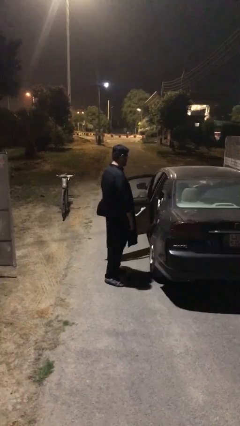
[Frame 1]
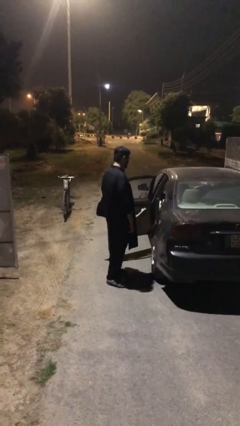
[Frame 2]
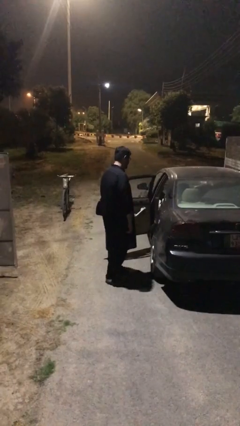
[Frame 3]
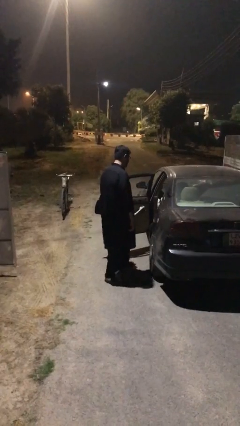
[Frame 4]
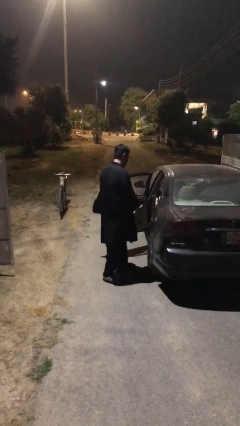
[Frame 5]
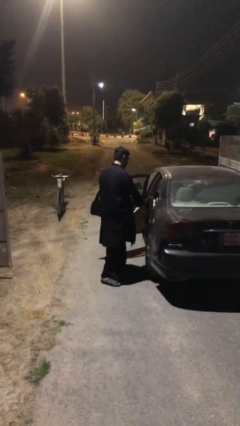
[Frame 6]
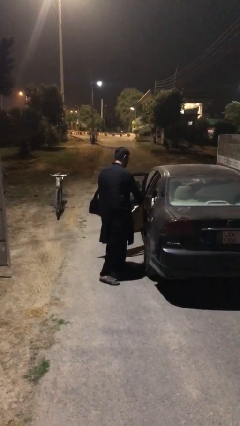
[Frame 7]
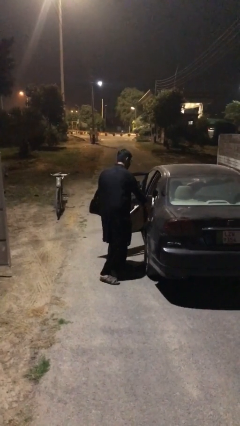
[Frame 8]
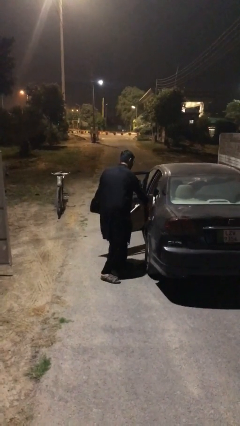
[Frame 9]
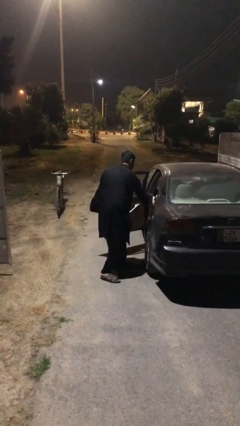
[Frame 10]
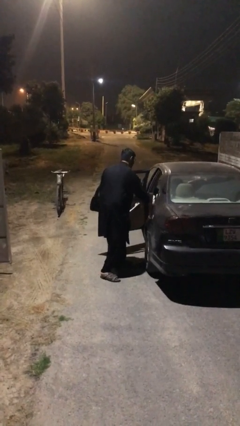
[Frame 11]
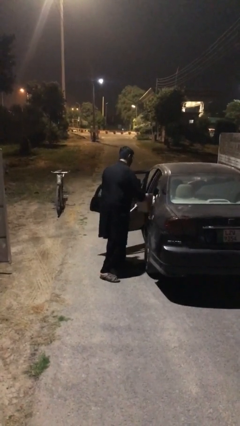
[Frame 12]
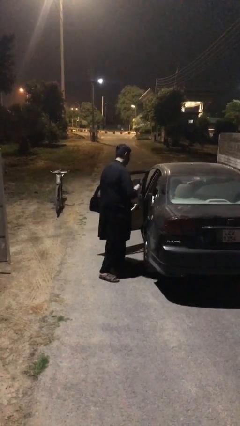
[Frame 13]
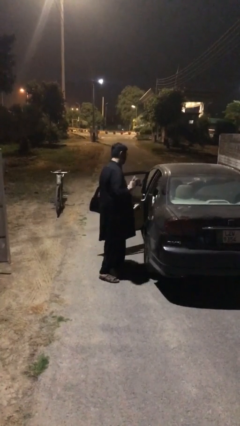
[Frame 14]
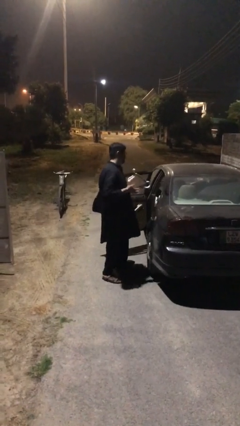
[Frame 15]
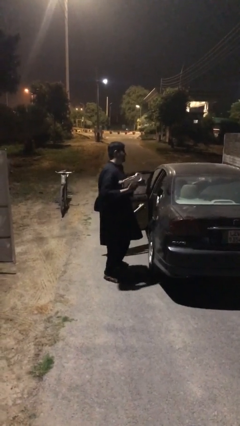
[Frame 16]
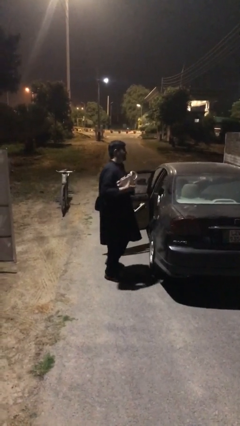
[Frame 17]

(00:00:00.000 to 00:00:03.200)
person unloads car

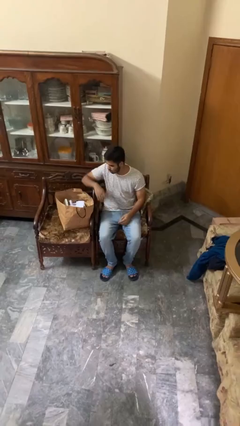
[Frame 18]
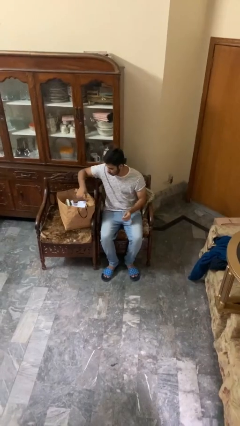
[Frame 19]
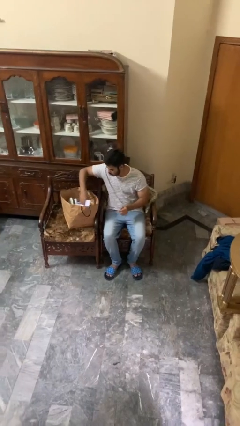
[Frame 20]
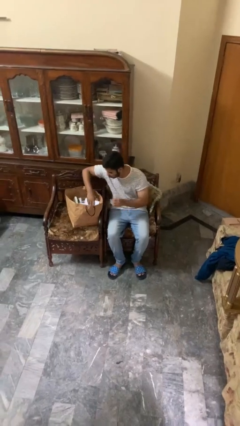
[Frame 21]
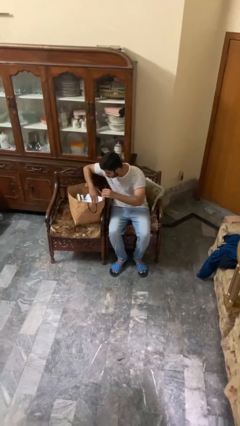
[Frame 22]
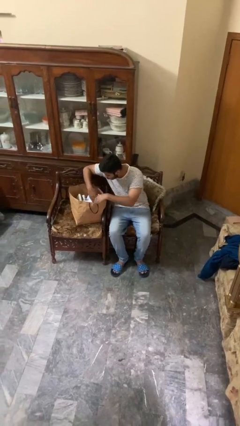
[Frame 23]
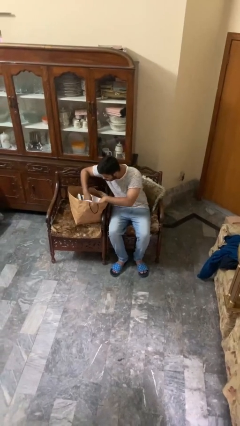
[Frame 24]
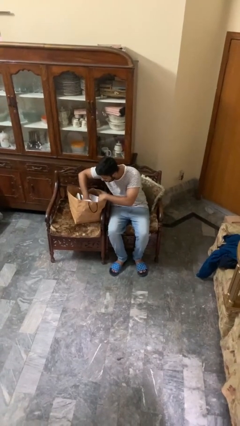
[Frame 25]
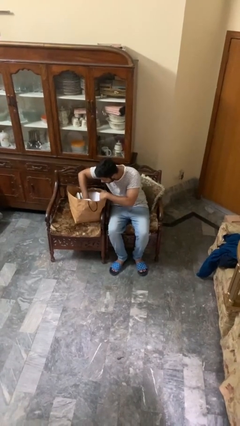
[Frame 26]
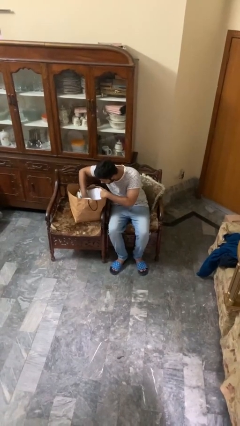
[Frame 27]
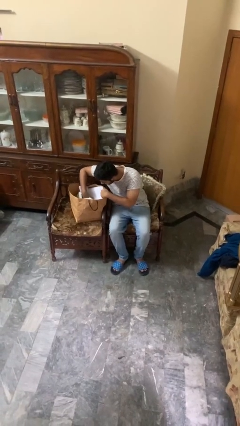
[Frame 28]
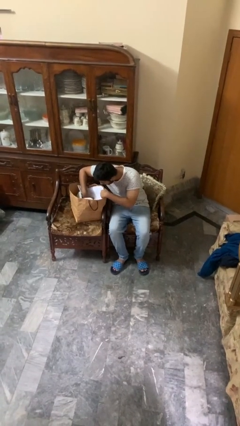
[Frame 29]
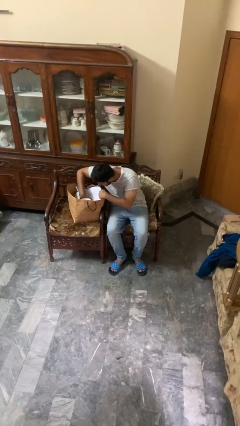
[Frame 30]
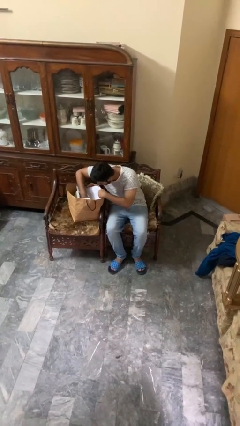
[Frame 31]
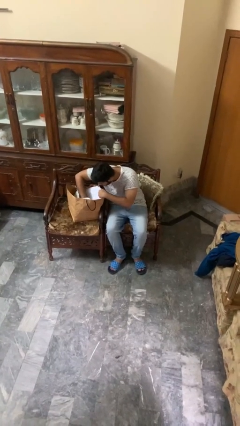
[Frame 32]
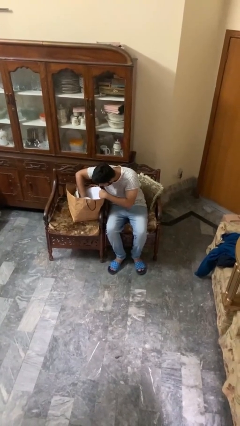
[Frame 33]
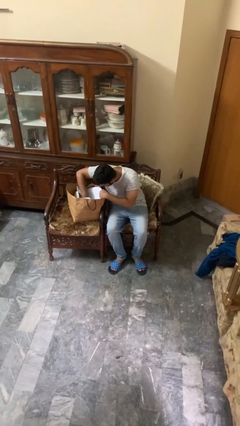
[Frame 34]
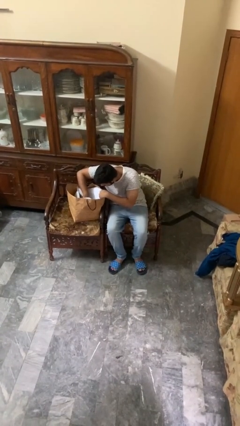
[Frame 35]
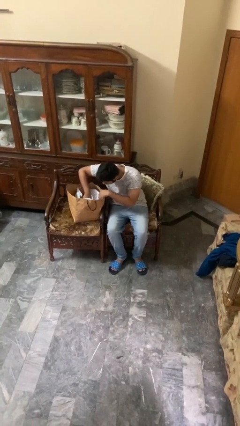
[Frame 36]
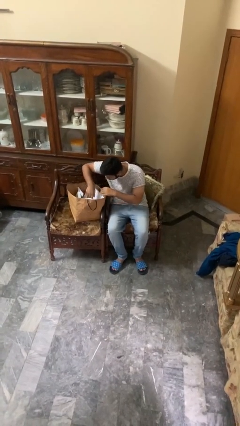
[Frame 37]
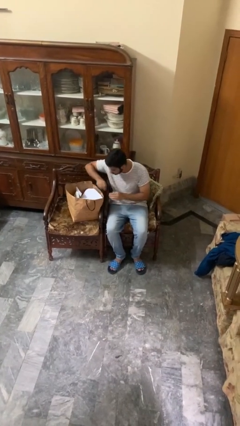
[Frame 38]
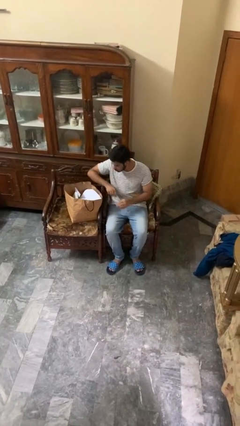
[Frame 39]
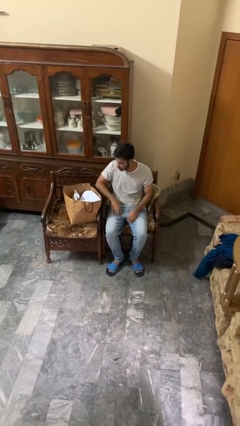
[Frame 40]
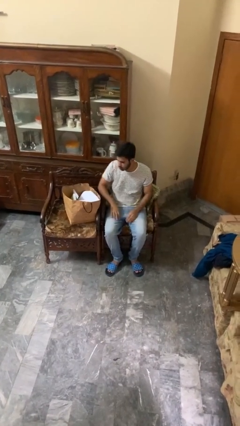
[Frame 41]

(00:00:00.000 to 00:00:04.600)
person searches in bag

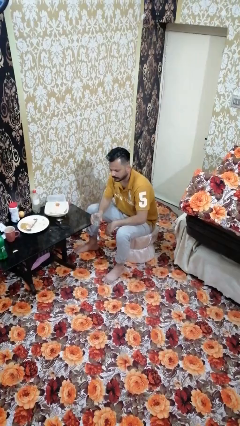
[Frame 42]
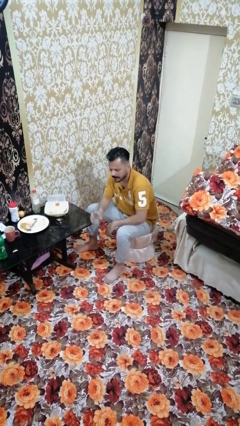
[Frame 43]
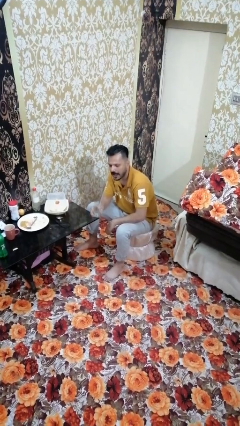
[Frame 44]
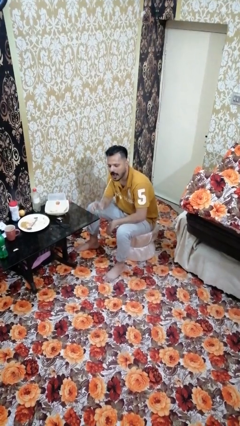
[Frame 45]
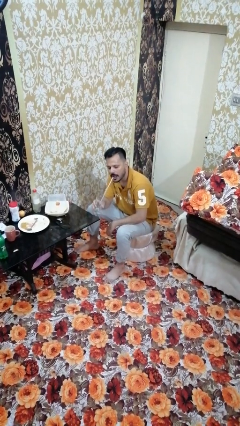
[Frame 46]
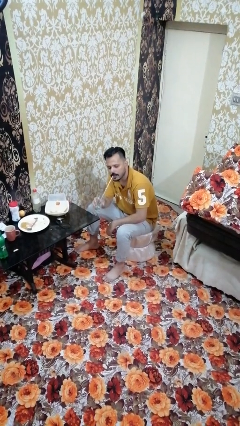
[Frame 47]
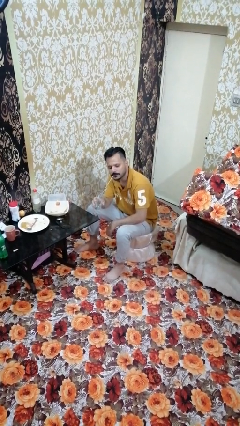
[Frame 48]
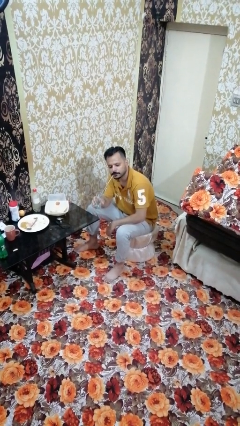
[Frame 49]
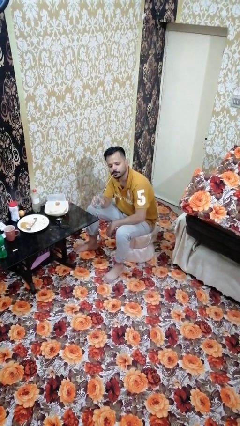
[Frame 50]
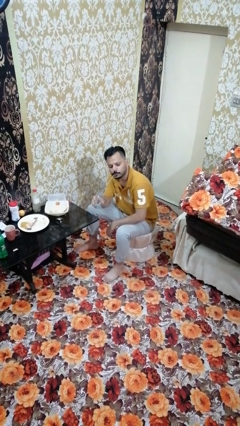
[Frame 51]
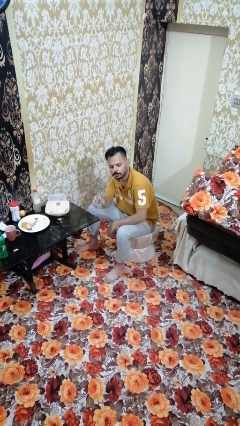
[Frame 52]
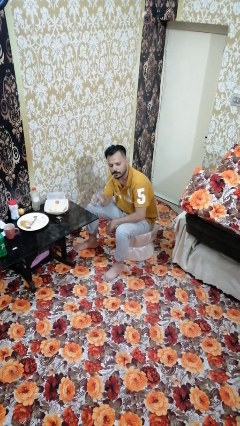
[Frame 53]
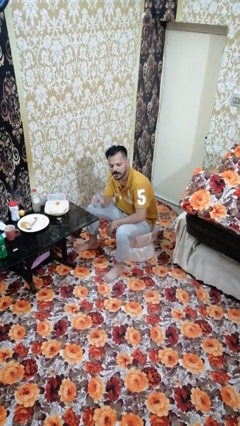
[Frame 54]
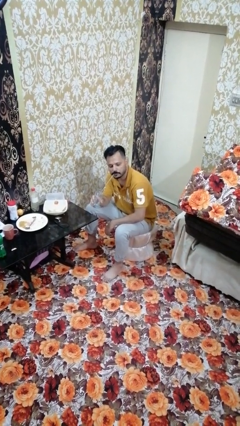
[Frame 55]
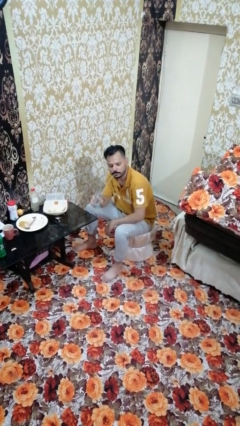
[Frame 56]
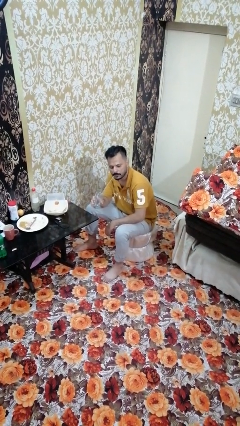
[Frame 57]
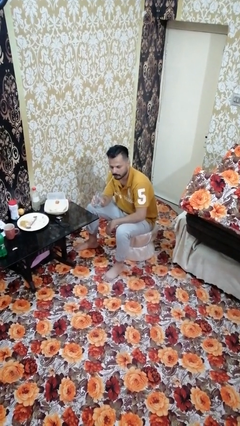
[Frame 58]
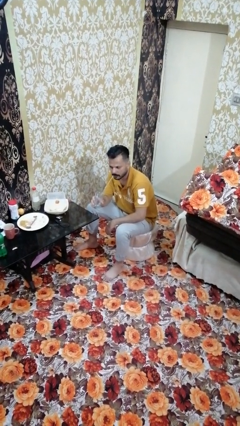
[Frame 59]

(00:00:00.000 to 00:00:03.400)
person drinks from straw

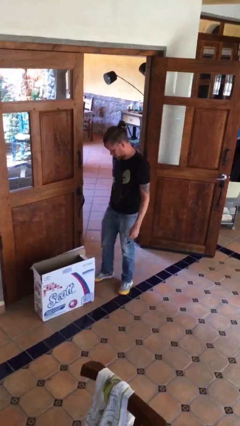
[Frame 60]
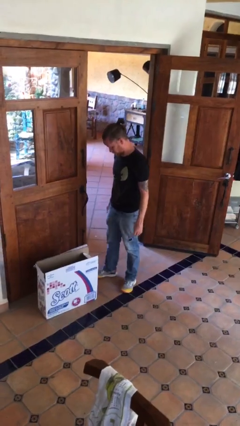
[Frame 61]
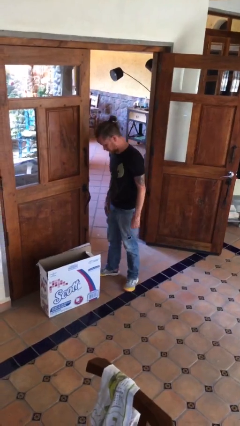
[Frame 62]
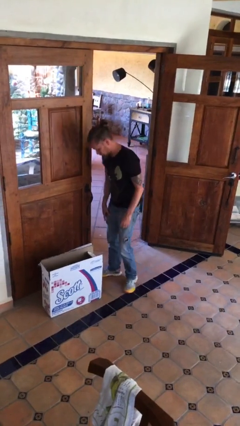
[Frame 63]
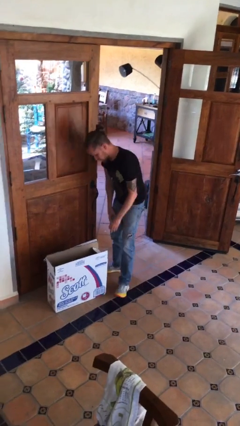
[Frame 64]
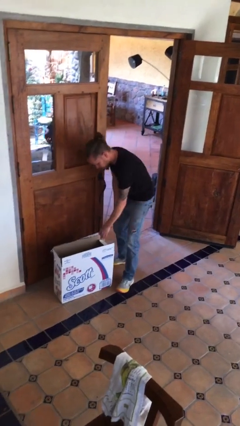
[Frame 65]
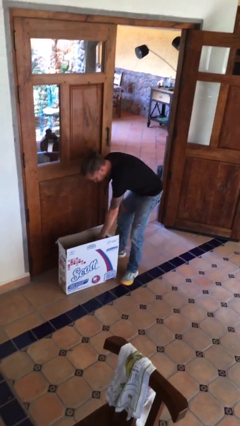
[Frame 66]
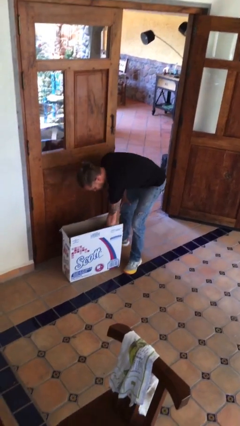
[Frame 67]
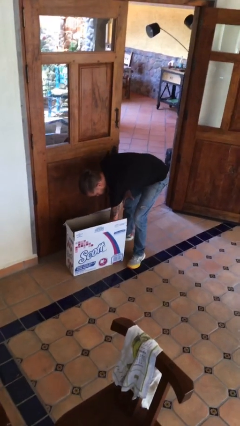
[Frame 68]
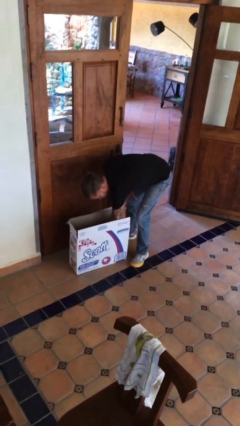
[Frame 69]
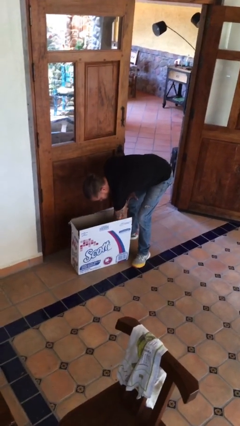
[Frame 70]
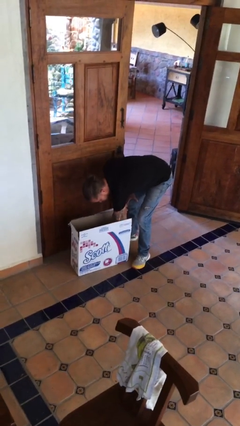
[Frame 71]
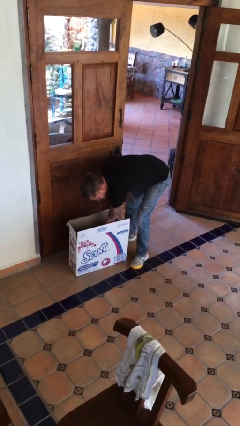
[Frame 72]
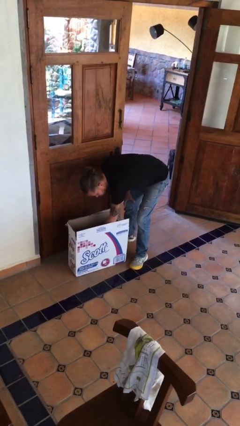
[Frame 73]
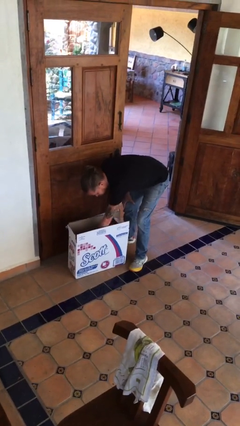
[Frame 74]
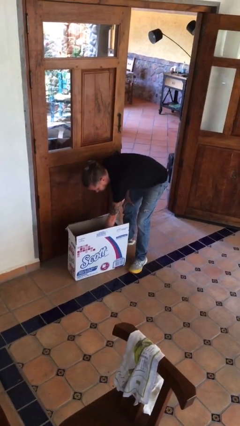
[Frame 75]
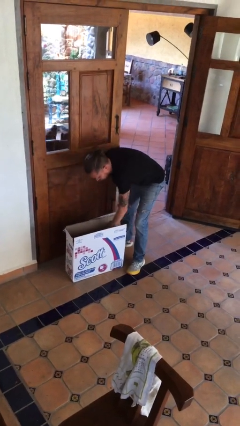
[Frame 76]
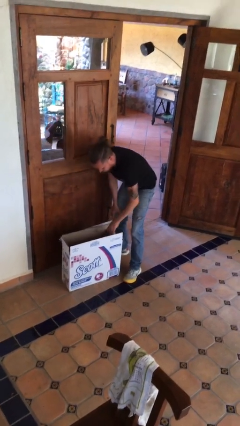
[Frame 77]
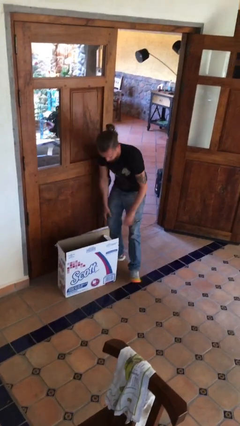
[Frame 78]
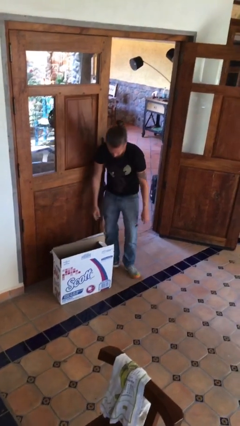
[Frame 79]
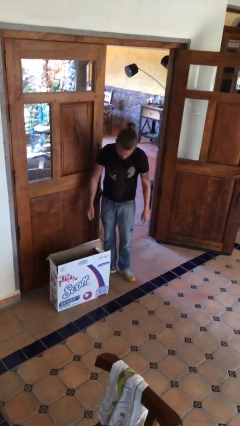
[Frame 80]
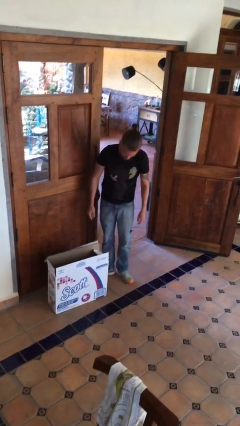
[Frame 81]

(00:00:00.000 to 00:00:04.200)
person searches in box

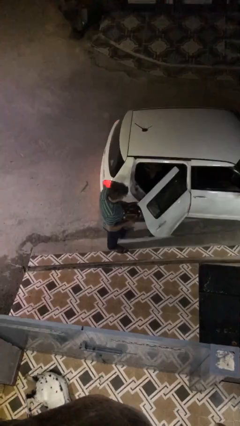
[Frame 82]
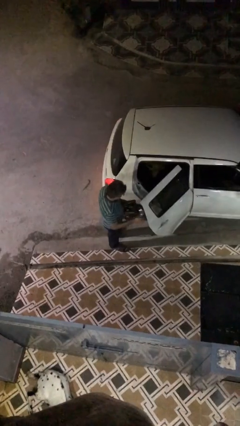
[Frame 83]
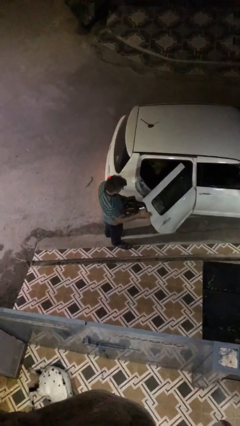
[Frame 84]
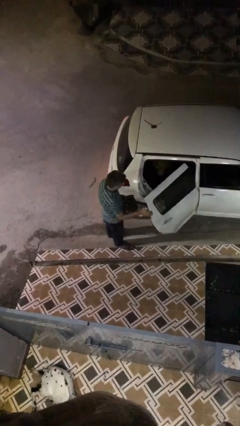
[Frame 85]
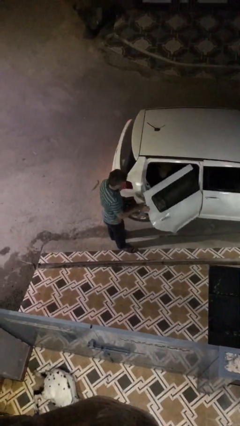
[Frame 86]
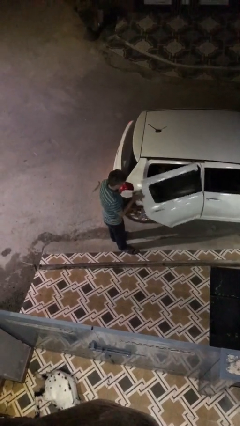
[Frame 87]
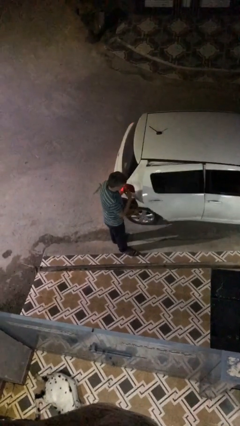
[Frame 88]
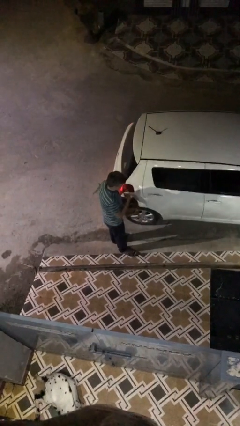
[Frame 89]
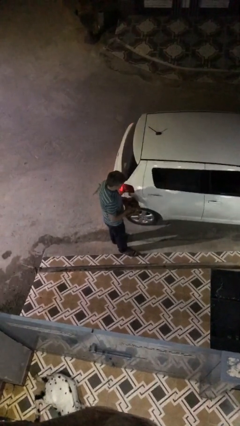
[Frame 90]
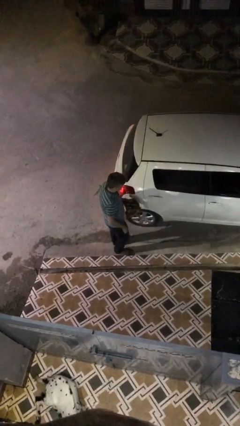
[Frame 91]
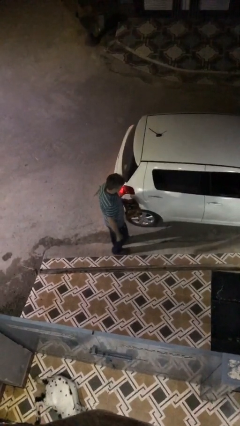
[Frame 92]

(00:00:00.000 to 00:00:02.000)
person closes car door

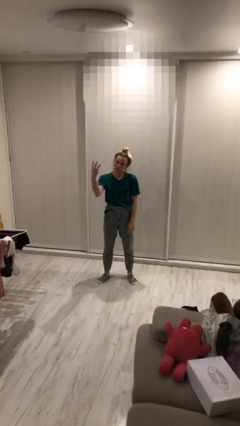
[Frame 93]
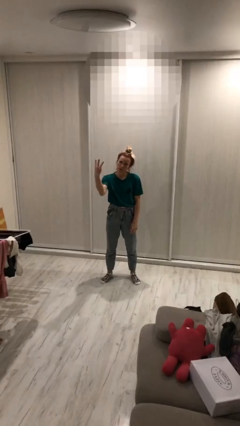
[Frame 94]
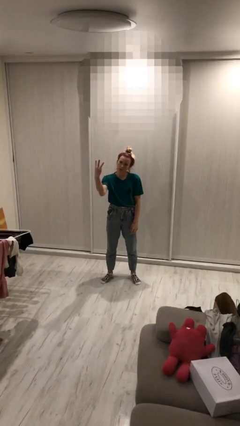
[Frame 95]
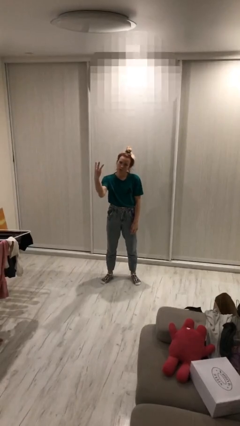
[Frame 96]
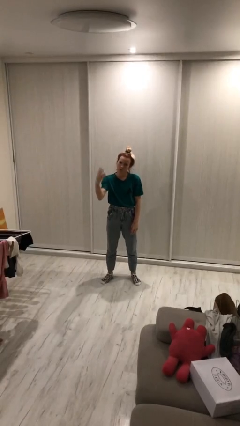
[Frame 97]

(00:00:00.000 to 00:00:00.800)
person gestures number three
